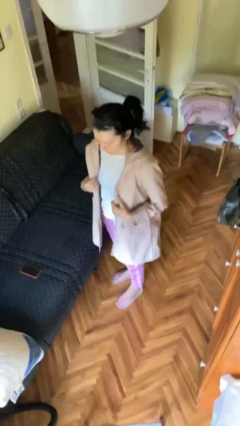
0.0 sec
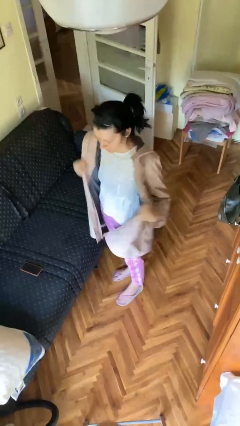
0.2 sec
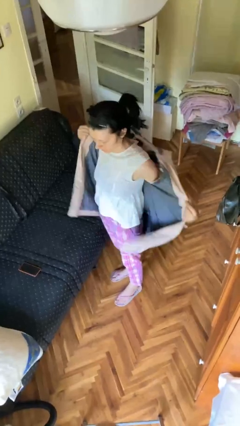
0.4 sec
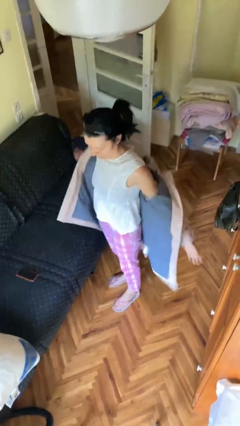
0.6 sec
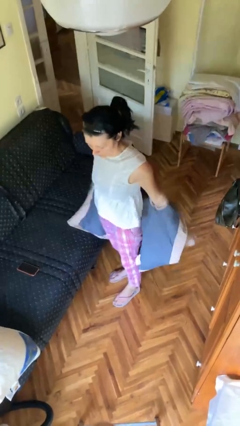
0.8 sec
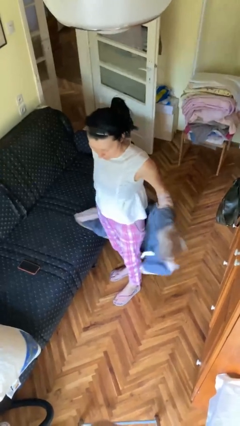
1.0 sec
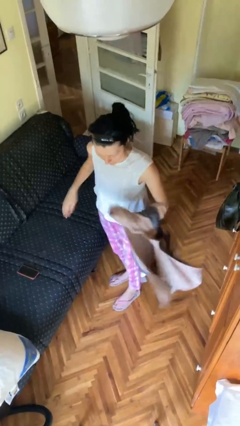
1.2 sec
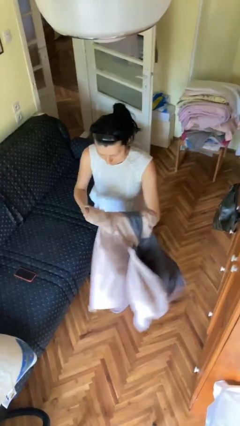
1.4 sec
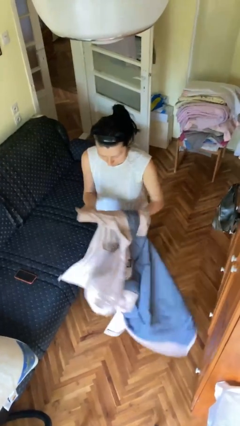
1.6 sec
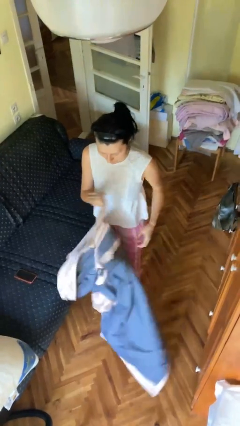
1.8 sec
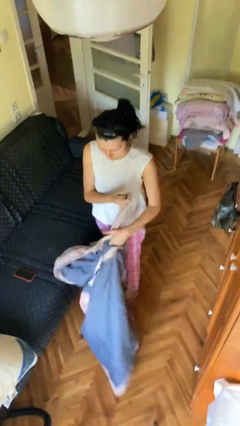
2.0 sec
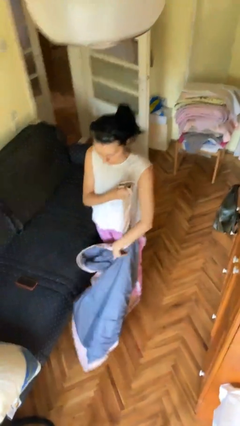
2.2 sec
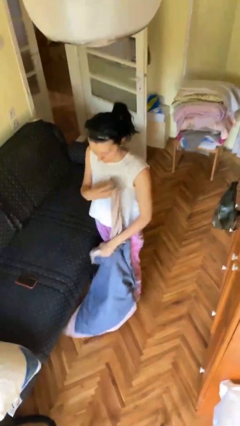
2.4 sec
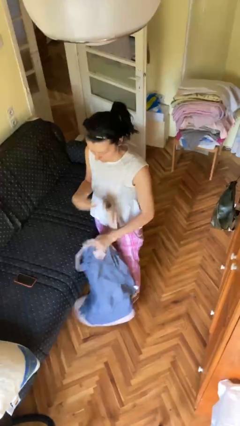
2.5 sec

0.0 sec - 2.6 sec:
person takes off jacket

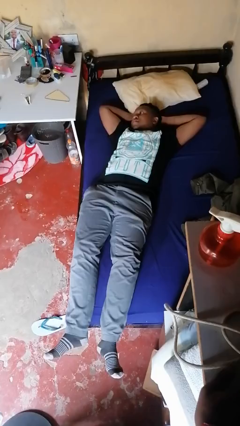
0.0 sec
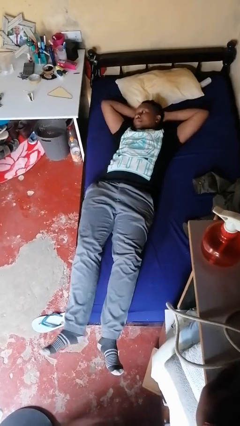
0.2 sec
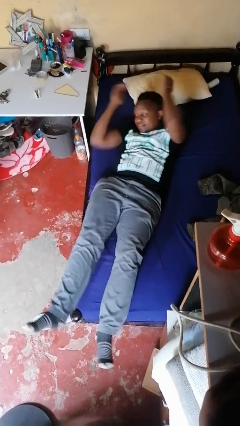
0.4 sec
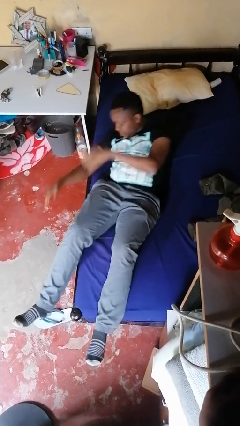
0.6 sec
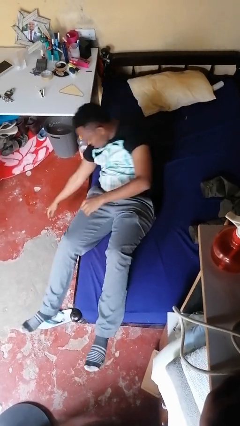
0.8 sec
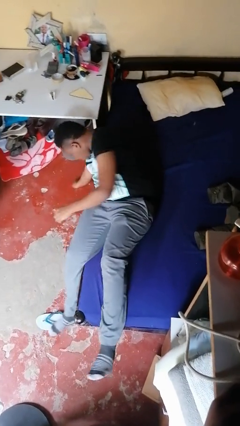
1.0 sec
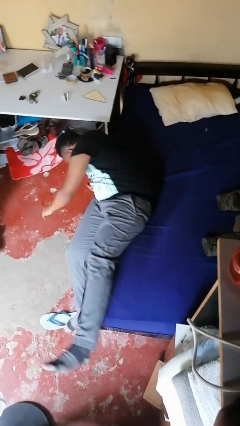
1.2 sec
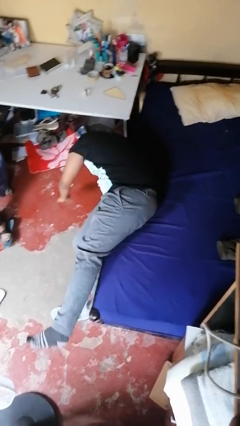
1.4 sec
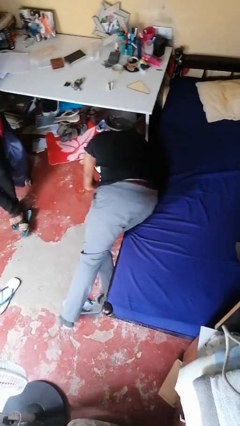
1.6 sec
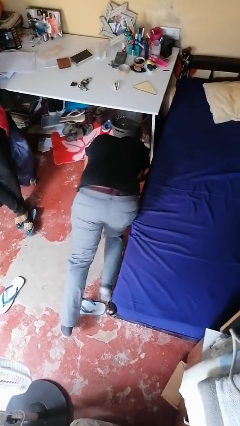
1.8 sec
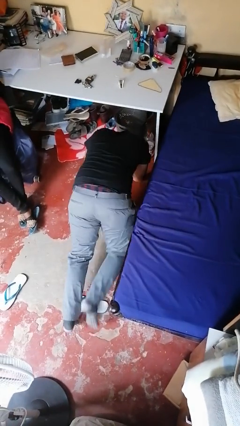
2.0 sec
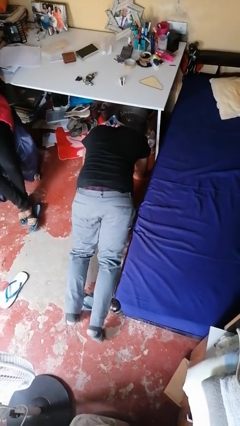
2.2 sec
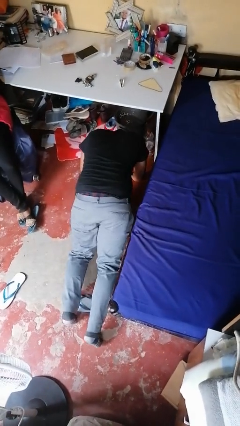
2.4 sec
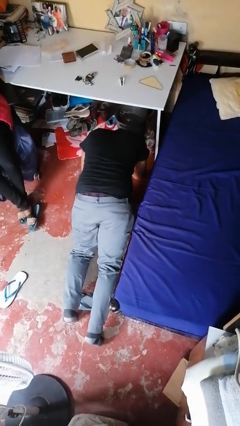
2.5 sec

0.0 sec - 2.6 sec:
person falls from bed

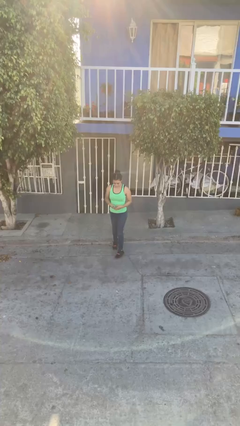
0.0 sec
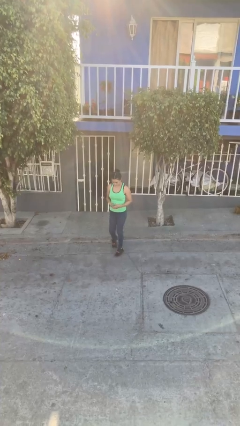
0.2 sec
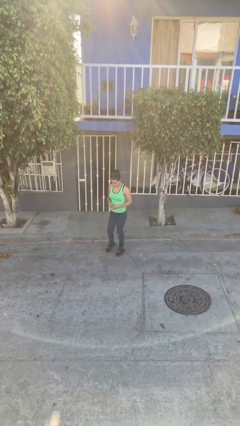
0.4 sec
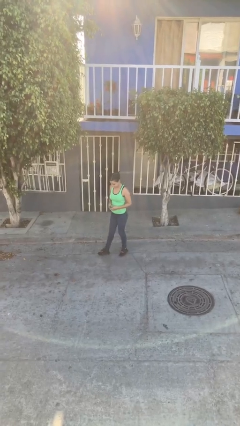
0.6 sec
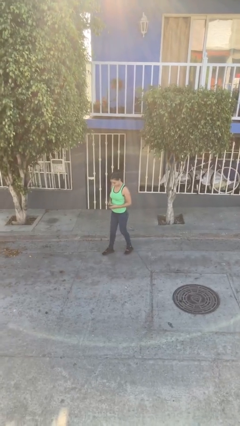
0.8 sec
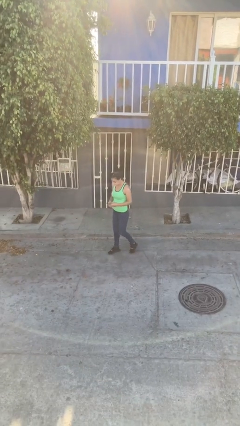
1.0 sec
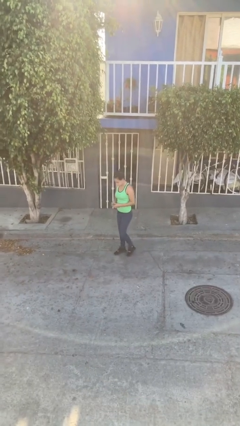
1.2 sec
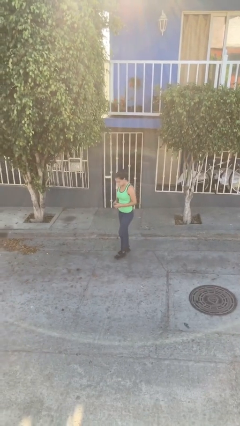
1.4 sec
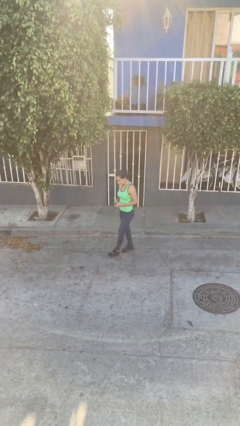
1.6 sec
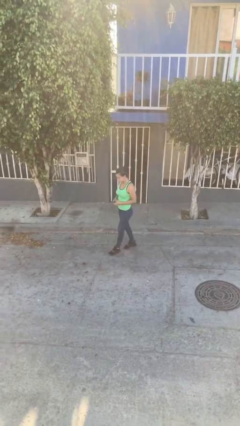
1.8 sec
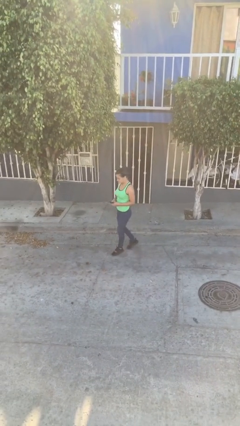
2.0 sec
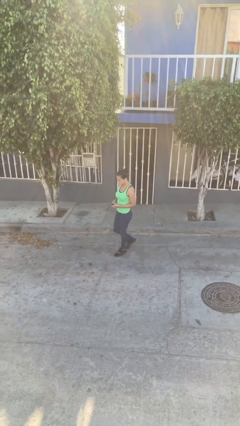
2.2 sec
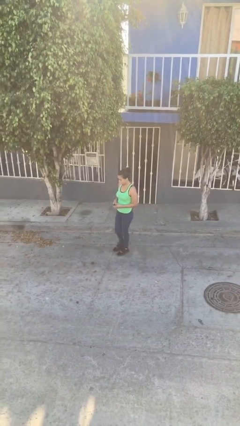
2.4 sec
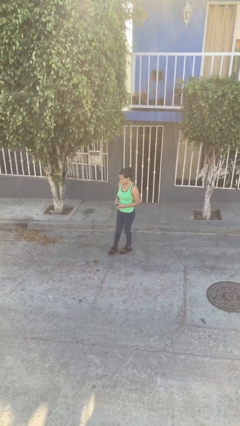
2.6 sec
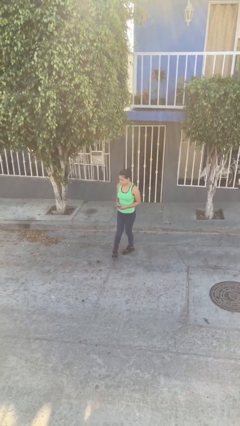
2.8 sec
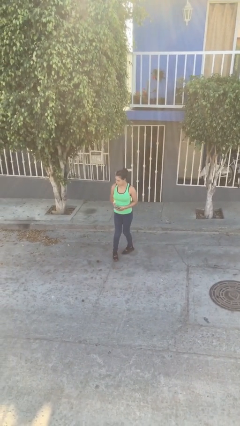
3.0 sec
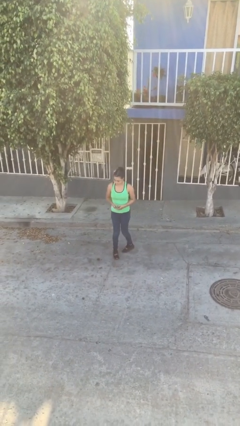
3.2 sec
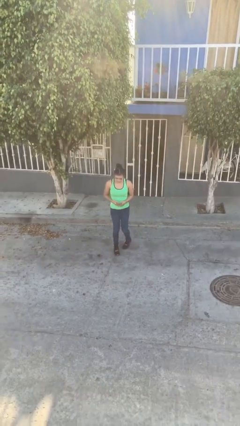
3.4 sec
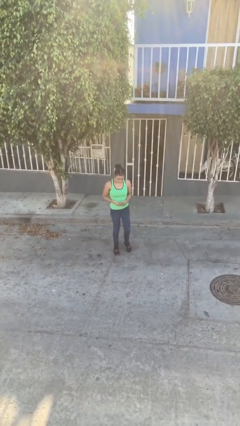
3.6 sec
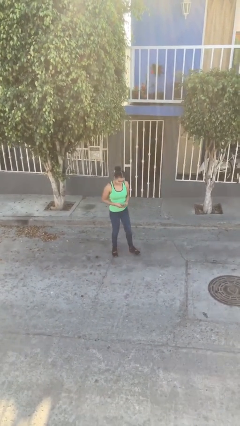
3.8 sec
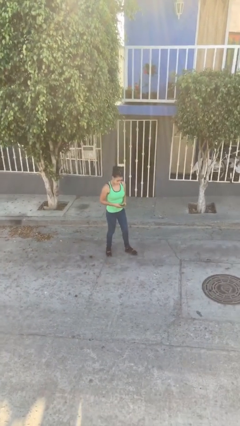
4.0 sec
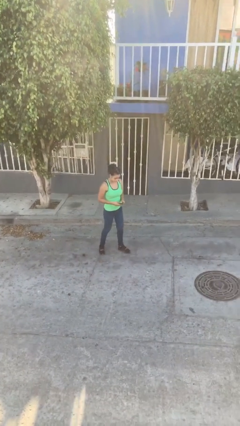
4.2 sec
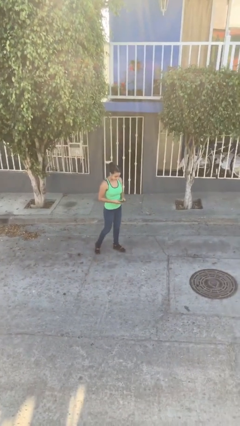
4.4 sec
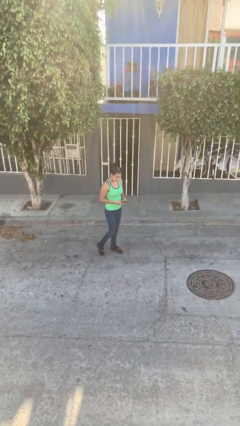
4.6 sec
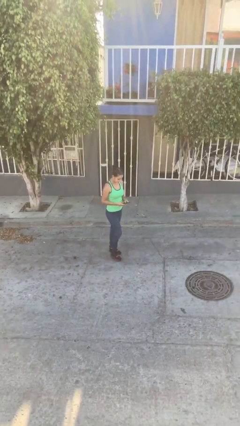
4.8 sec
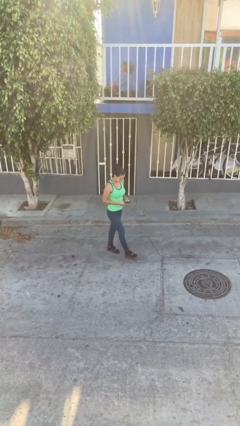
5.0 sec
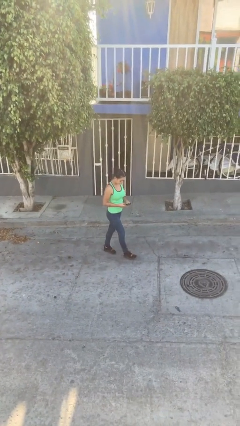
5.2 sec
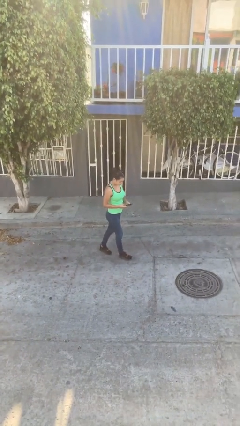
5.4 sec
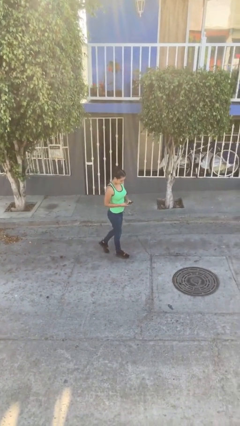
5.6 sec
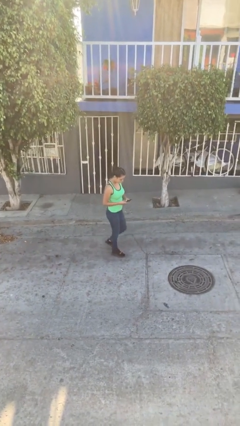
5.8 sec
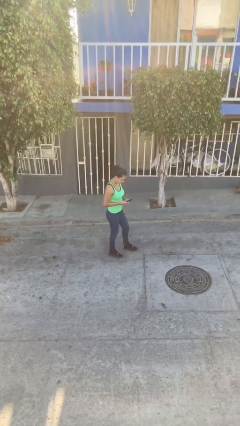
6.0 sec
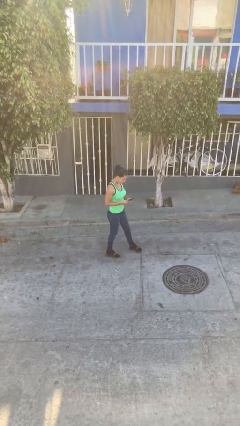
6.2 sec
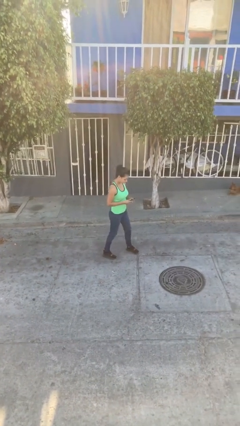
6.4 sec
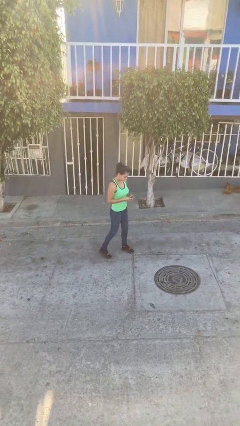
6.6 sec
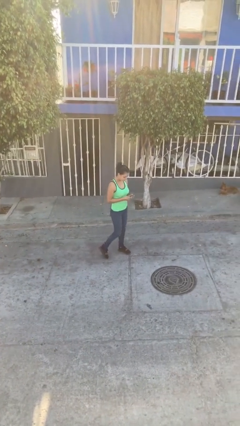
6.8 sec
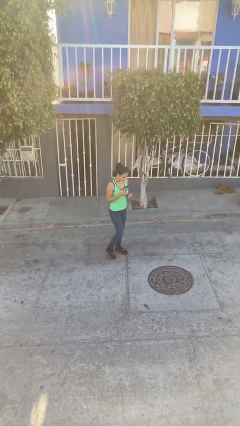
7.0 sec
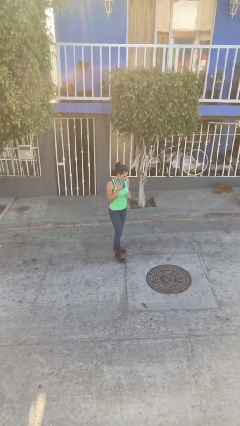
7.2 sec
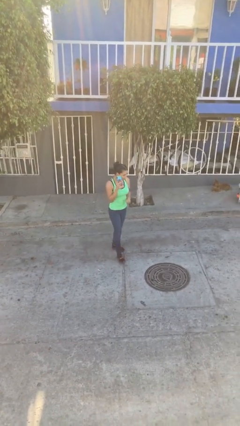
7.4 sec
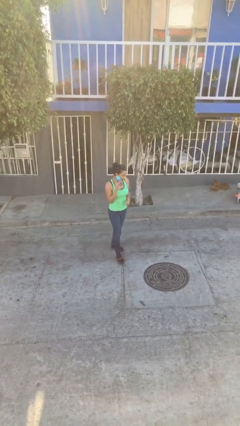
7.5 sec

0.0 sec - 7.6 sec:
person texts on phone

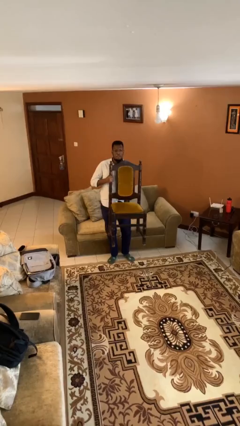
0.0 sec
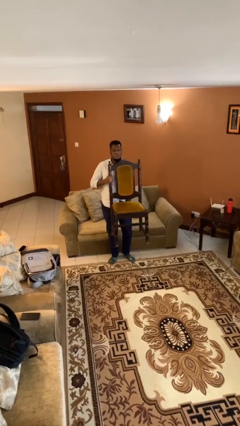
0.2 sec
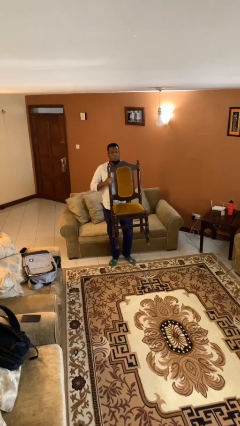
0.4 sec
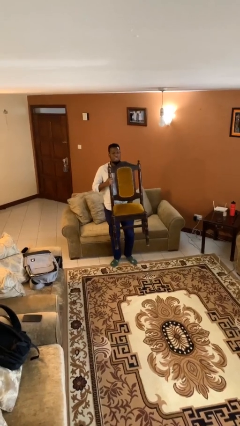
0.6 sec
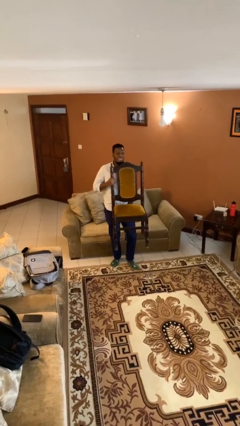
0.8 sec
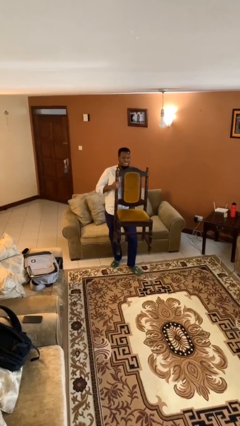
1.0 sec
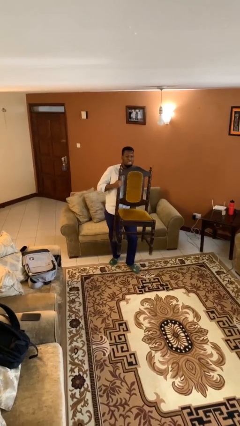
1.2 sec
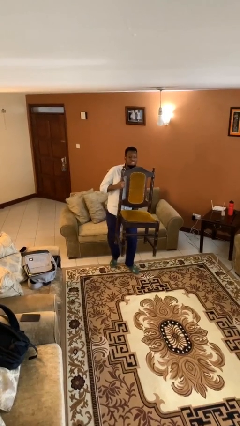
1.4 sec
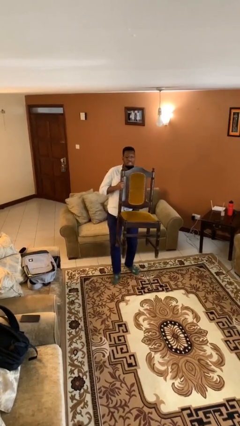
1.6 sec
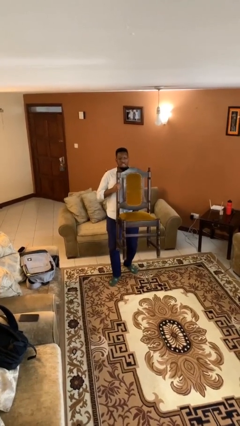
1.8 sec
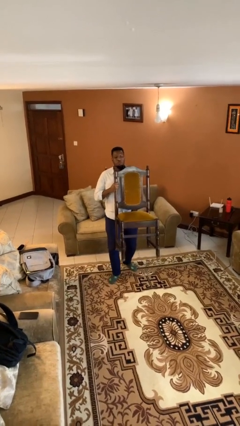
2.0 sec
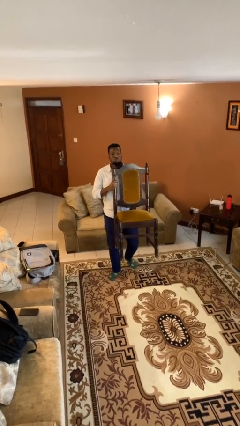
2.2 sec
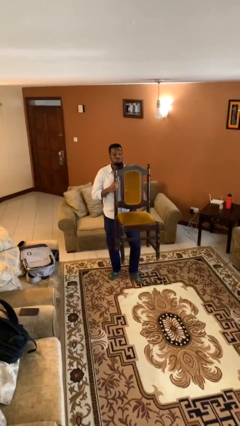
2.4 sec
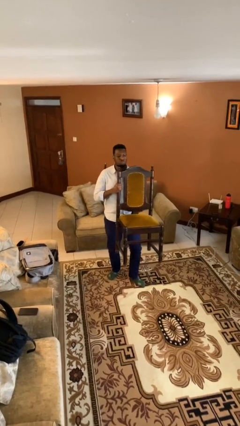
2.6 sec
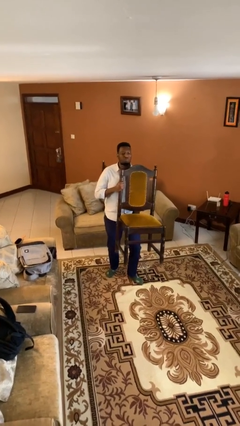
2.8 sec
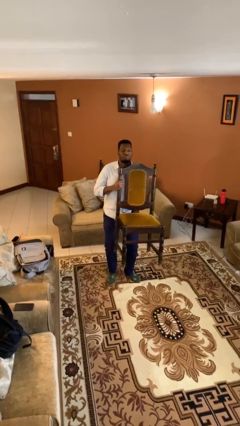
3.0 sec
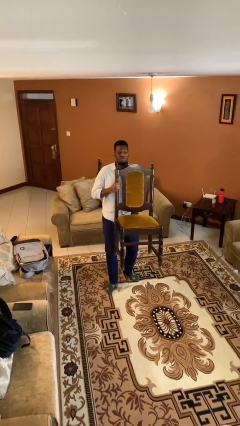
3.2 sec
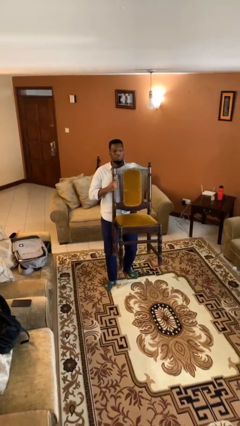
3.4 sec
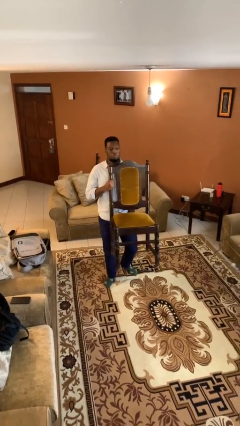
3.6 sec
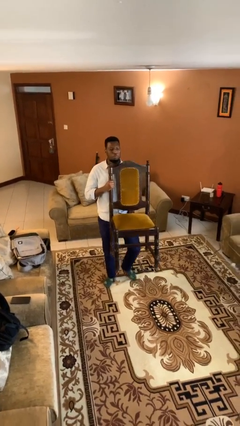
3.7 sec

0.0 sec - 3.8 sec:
person carries heavy object

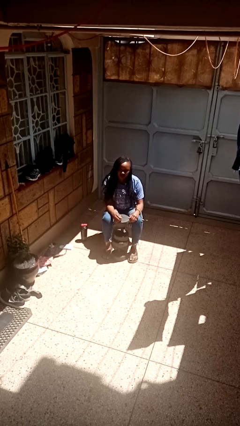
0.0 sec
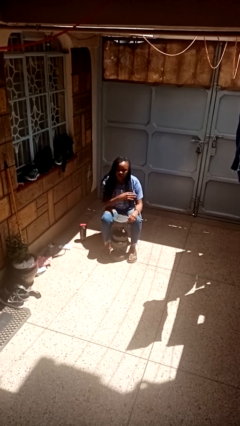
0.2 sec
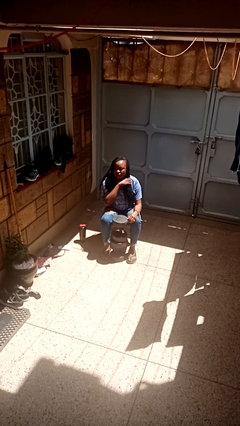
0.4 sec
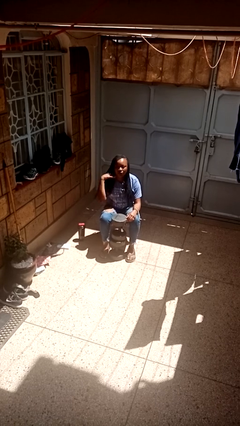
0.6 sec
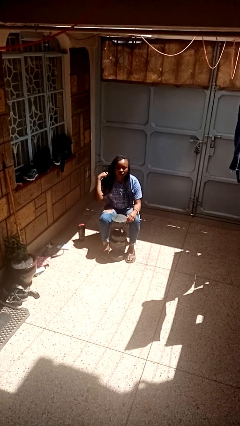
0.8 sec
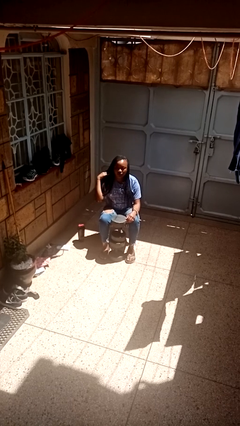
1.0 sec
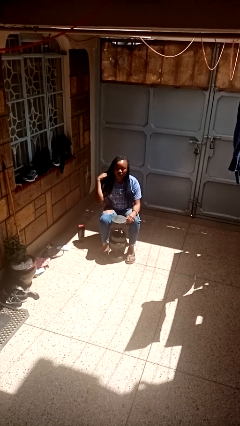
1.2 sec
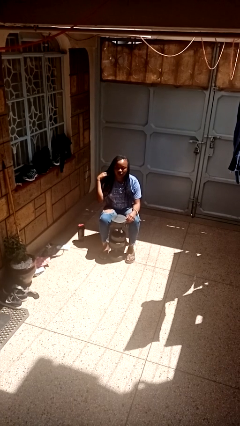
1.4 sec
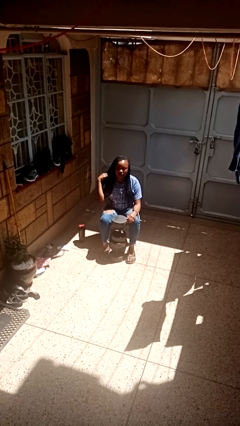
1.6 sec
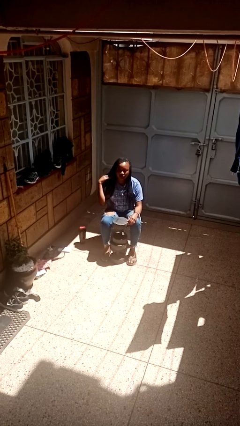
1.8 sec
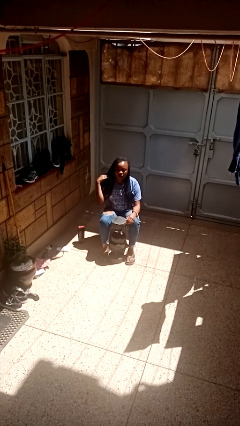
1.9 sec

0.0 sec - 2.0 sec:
person gestures cut
